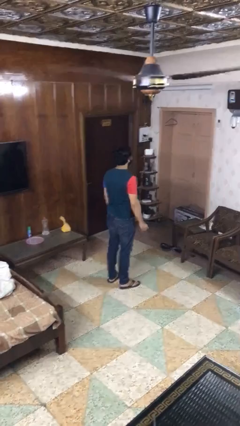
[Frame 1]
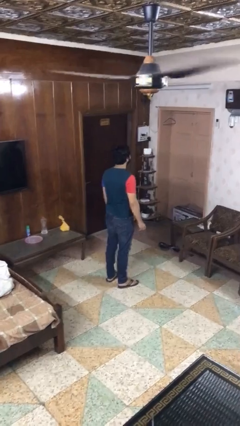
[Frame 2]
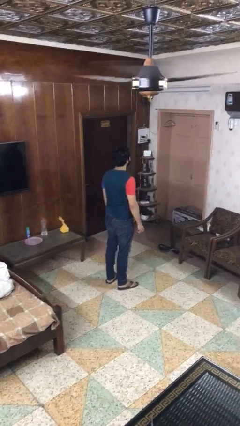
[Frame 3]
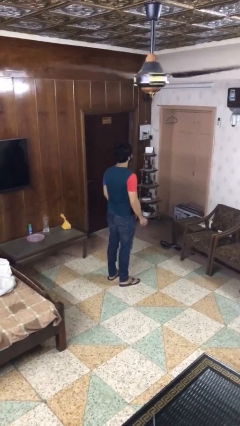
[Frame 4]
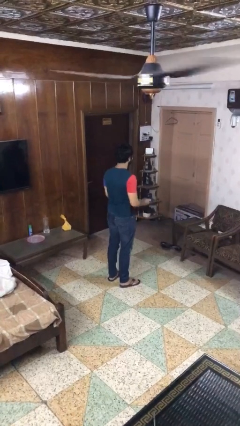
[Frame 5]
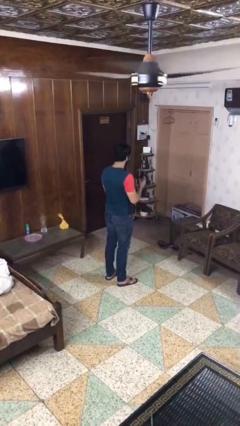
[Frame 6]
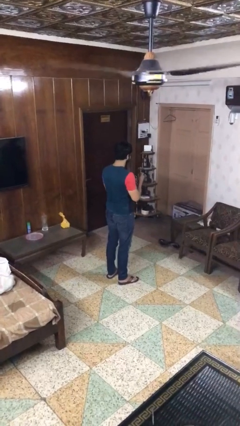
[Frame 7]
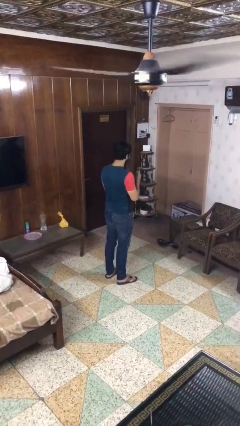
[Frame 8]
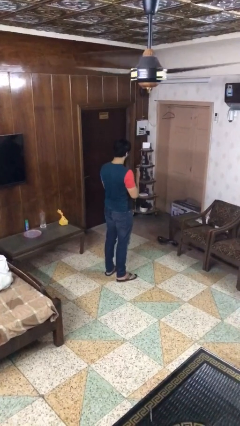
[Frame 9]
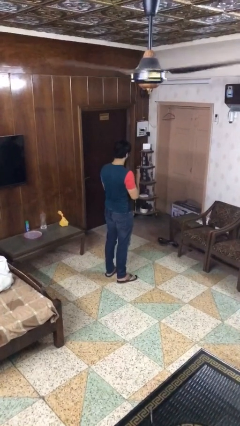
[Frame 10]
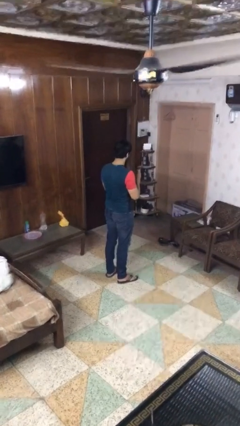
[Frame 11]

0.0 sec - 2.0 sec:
person clips fingernails

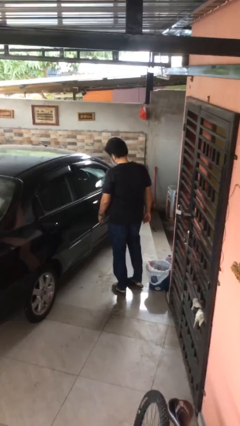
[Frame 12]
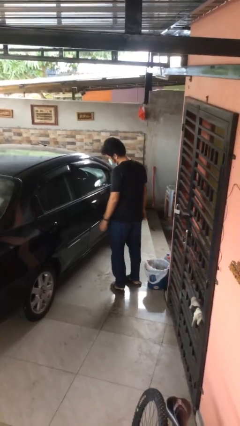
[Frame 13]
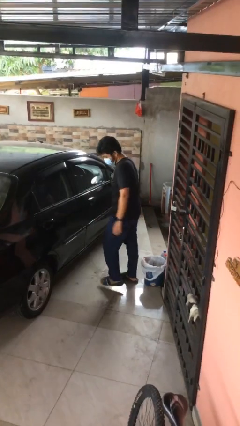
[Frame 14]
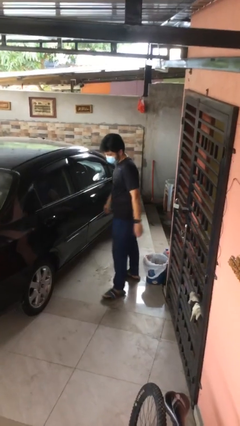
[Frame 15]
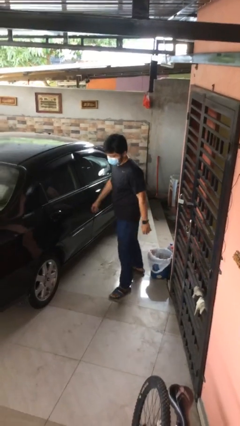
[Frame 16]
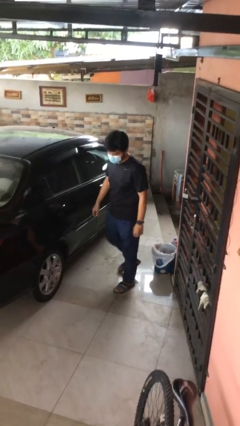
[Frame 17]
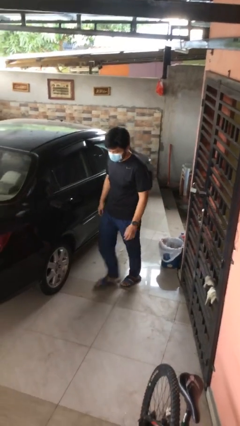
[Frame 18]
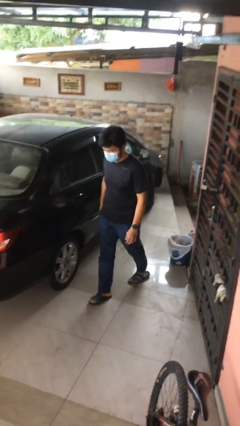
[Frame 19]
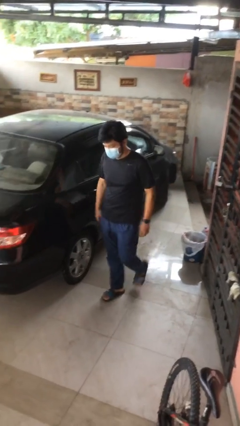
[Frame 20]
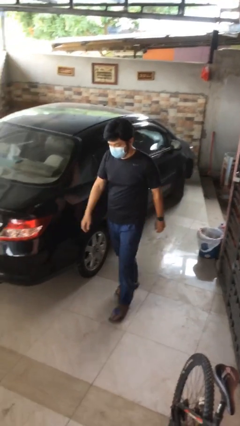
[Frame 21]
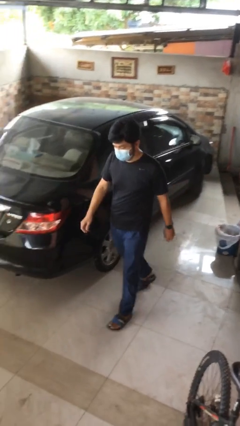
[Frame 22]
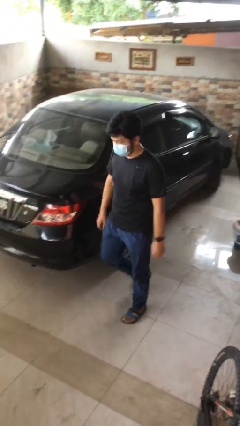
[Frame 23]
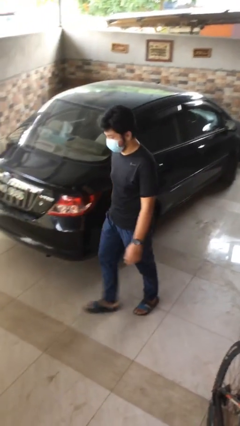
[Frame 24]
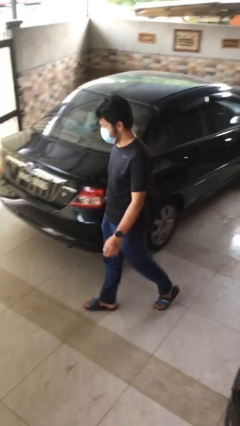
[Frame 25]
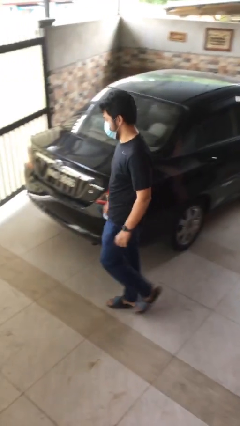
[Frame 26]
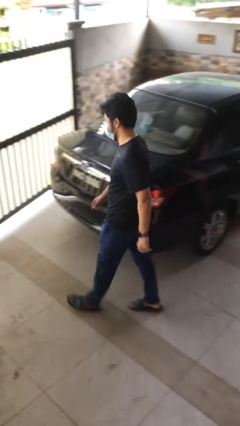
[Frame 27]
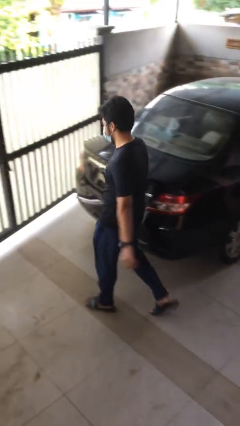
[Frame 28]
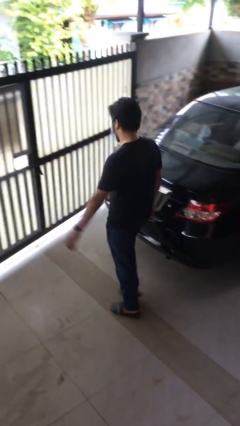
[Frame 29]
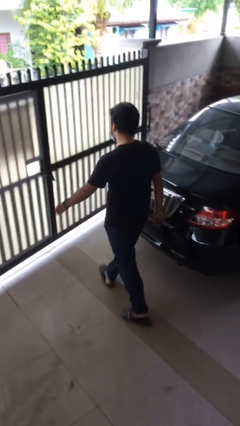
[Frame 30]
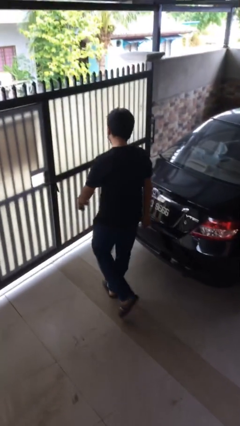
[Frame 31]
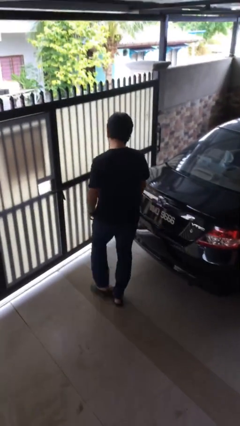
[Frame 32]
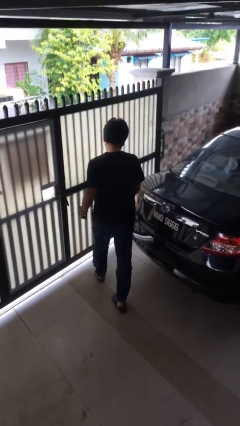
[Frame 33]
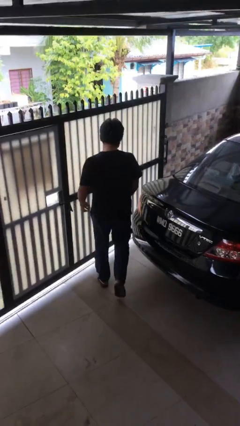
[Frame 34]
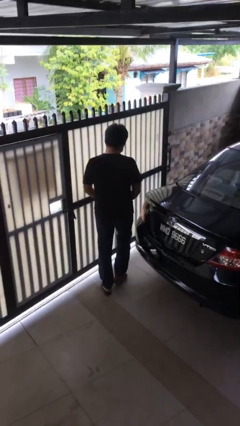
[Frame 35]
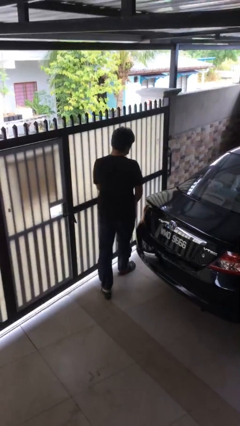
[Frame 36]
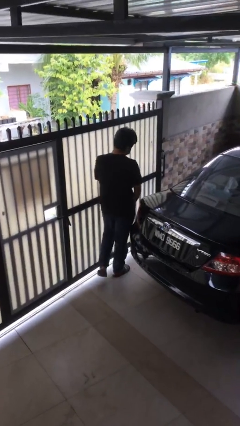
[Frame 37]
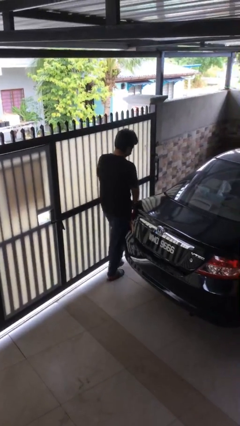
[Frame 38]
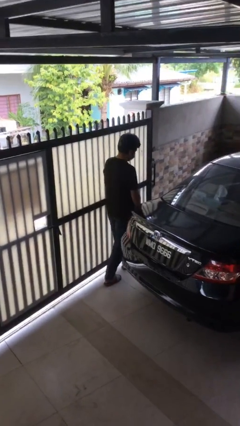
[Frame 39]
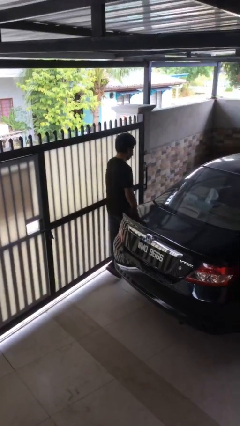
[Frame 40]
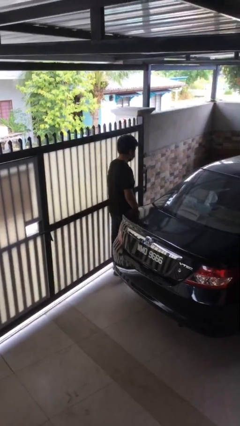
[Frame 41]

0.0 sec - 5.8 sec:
person walks around car

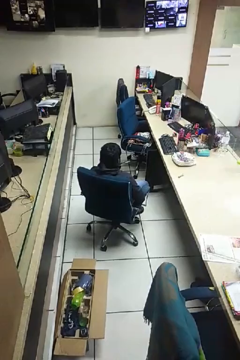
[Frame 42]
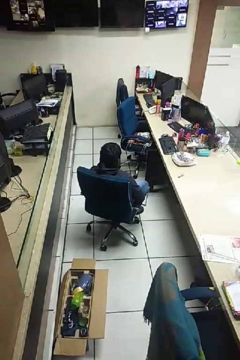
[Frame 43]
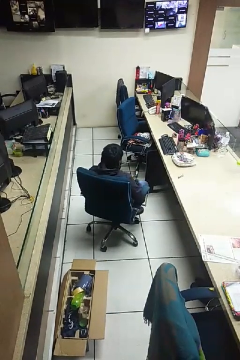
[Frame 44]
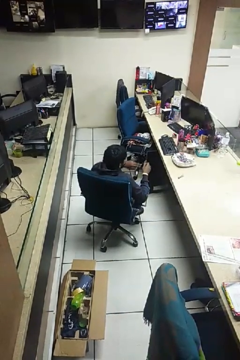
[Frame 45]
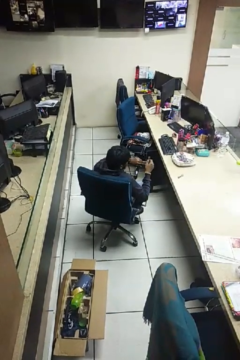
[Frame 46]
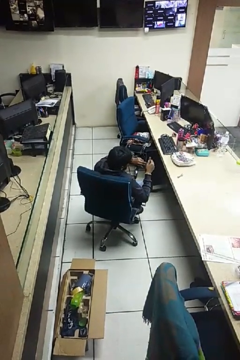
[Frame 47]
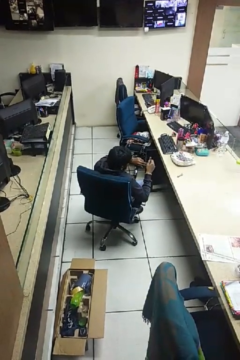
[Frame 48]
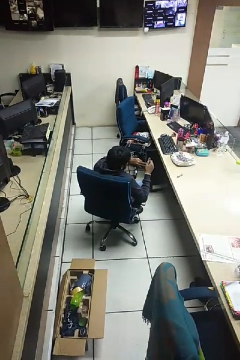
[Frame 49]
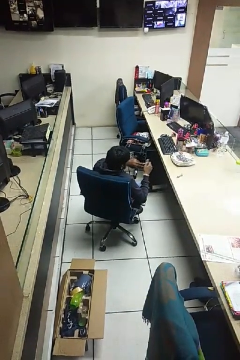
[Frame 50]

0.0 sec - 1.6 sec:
person files fingernails

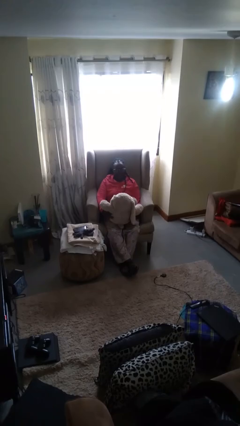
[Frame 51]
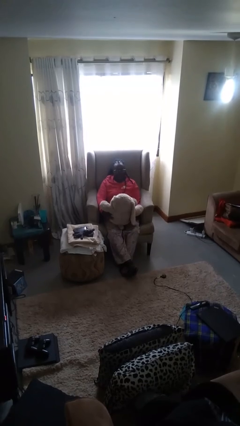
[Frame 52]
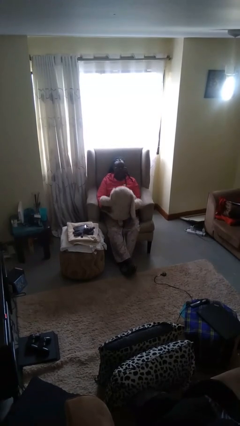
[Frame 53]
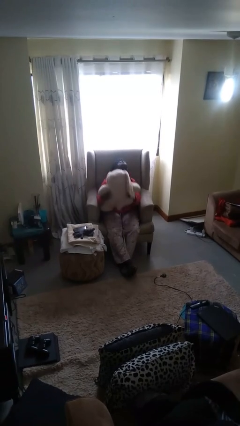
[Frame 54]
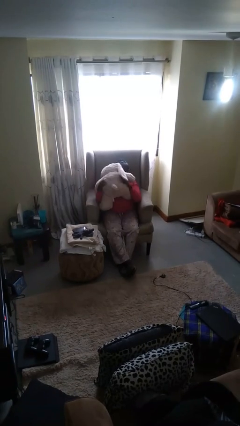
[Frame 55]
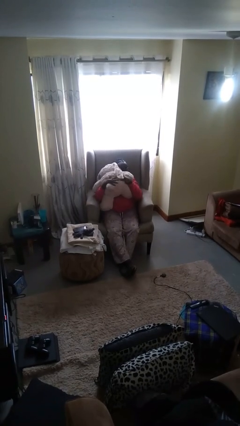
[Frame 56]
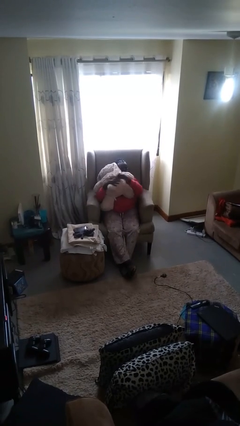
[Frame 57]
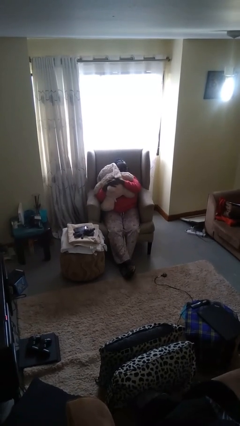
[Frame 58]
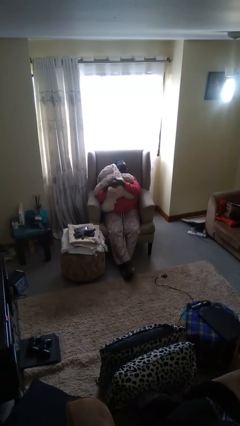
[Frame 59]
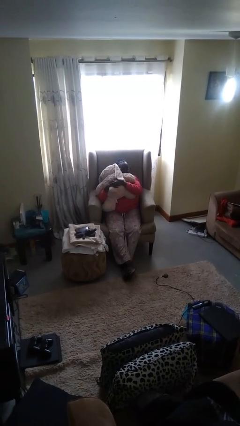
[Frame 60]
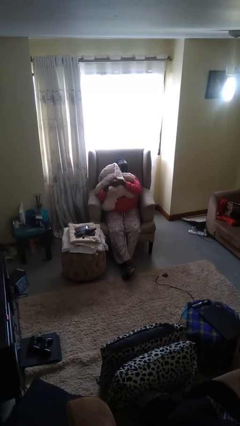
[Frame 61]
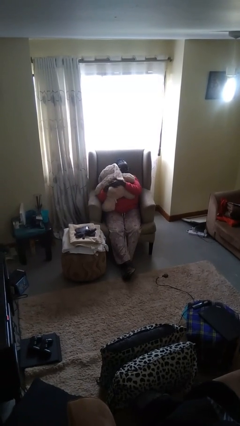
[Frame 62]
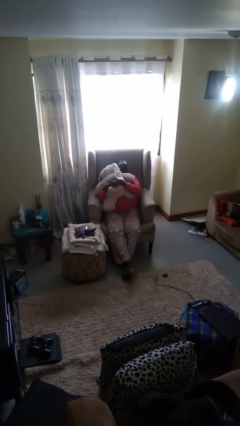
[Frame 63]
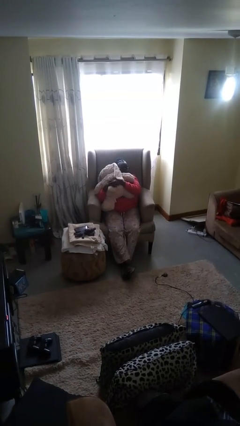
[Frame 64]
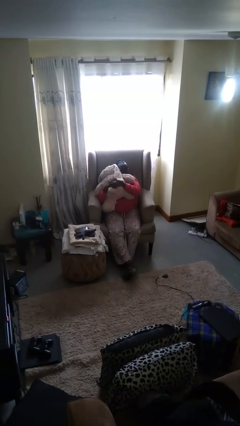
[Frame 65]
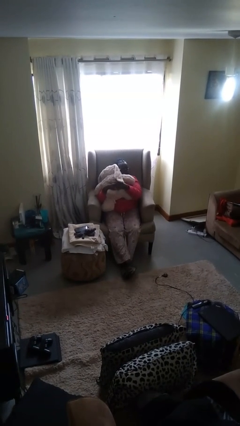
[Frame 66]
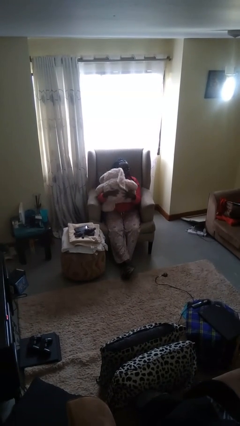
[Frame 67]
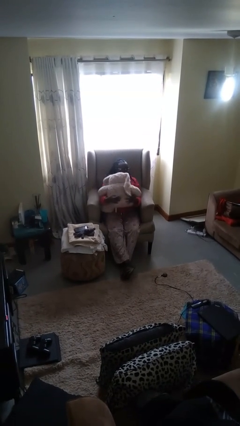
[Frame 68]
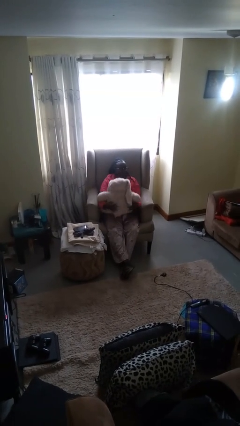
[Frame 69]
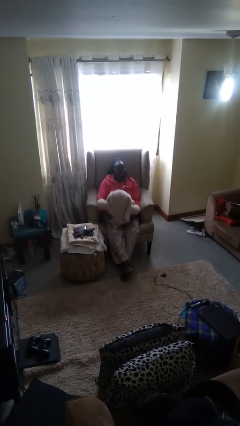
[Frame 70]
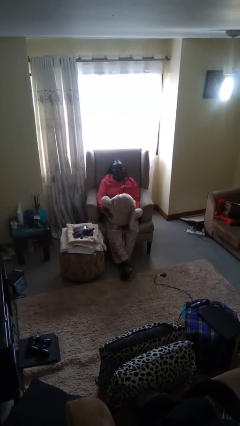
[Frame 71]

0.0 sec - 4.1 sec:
person hugs stuffed animal

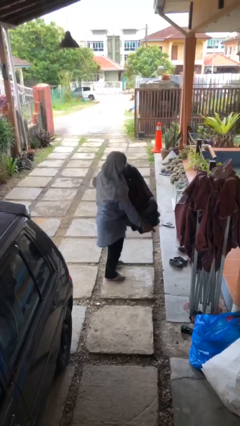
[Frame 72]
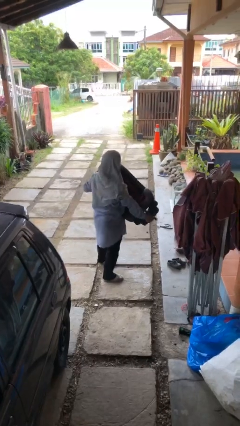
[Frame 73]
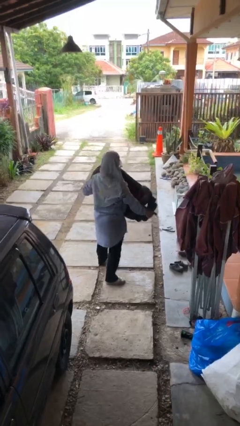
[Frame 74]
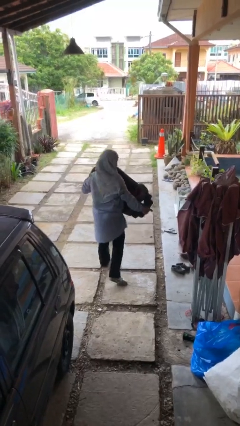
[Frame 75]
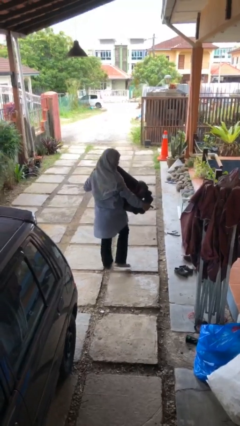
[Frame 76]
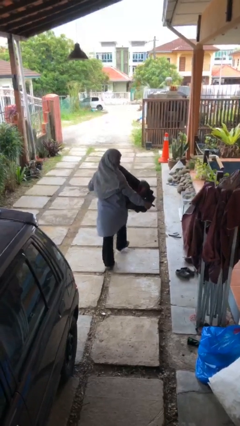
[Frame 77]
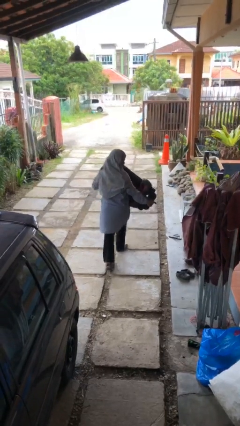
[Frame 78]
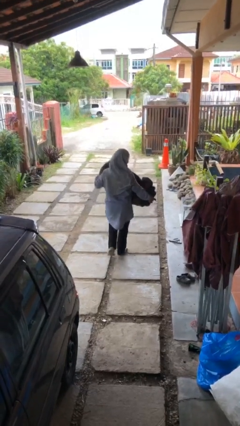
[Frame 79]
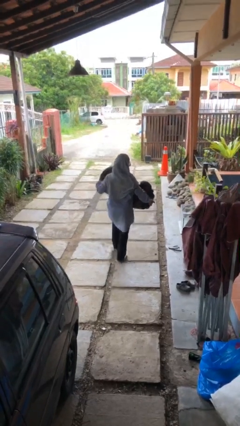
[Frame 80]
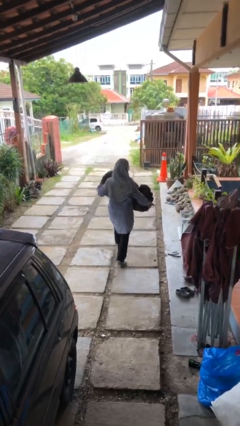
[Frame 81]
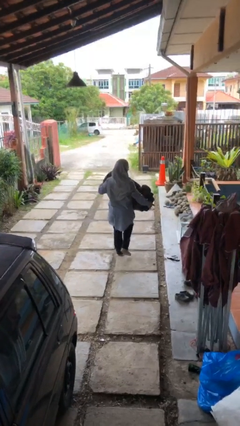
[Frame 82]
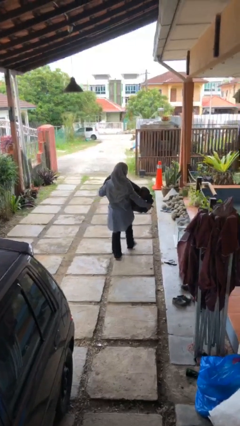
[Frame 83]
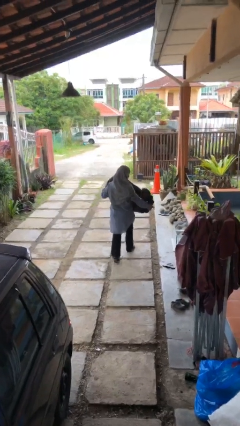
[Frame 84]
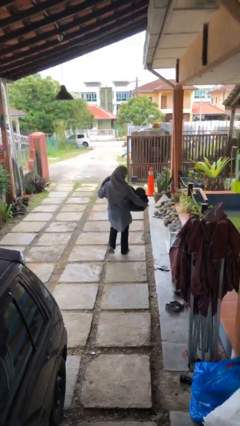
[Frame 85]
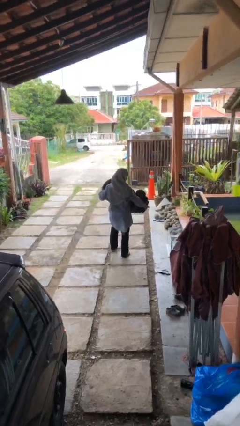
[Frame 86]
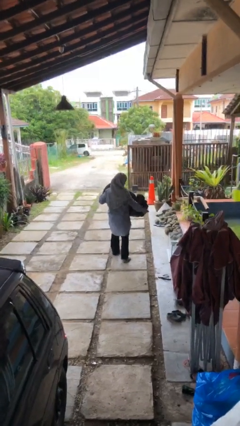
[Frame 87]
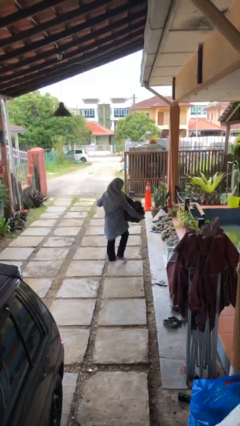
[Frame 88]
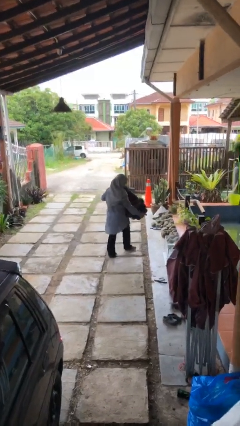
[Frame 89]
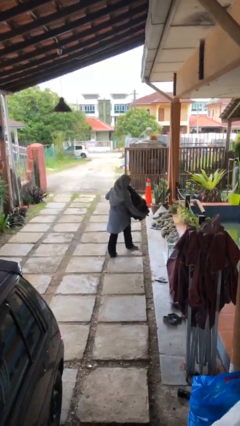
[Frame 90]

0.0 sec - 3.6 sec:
person carries heavy object

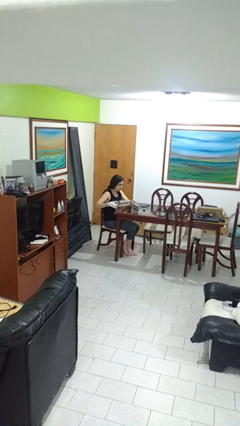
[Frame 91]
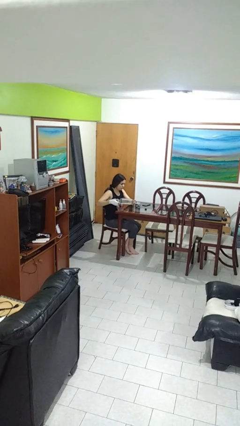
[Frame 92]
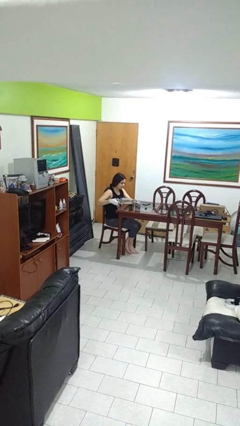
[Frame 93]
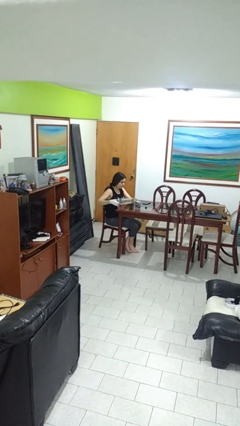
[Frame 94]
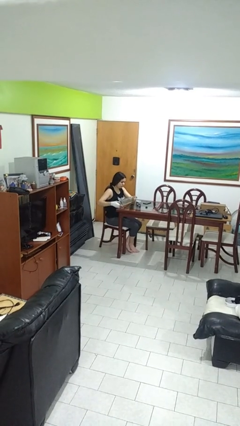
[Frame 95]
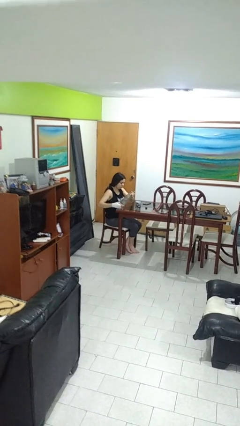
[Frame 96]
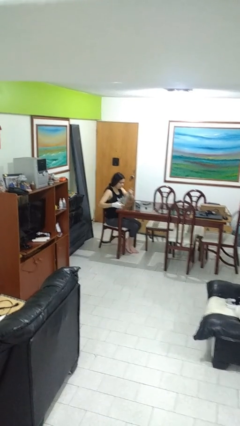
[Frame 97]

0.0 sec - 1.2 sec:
person pours liquid into cup
